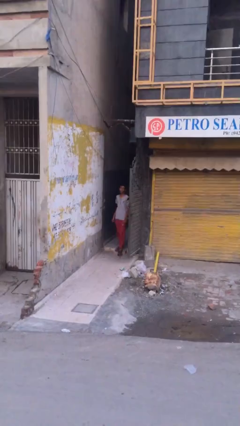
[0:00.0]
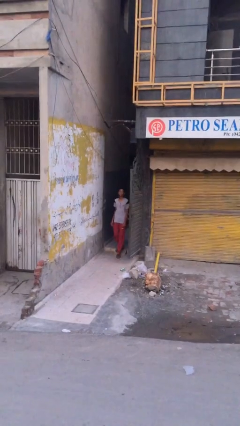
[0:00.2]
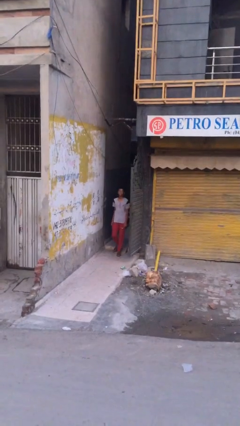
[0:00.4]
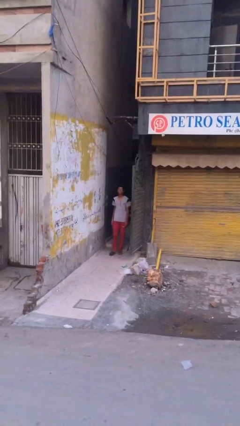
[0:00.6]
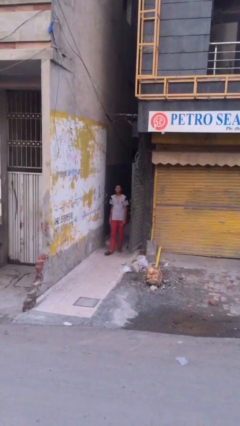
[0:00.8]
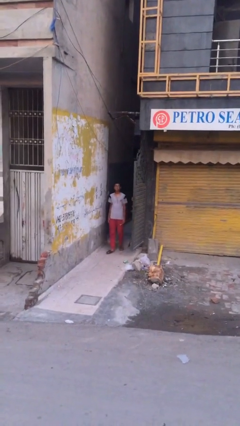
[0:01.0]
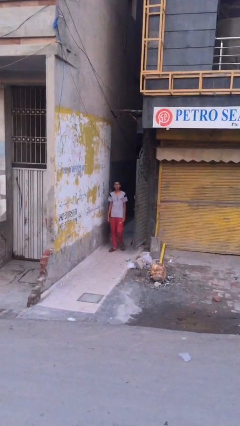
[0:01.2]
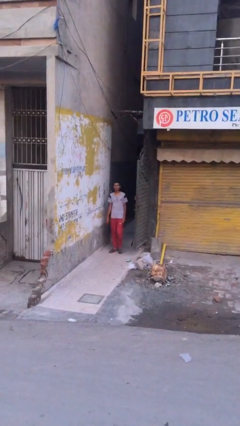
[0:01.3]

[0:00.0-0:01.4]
person enters scene through structure

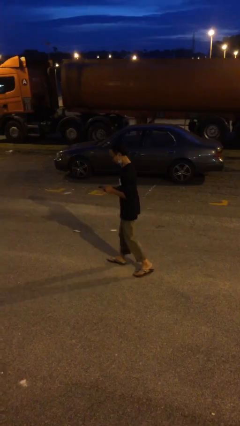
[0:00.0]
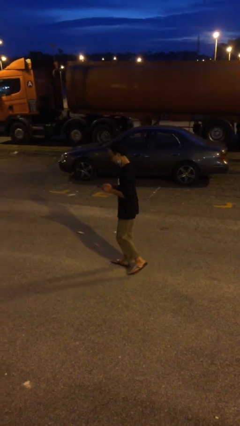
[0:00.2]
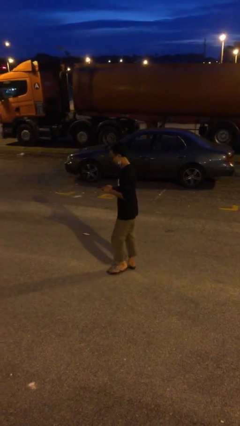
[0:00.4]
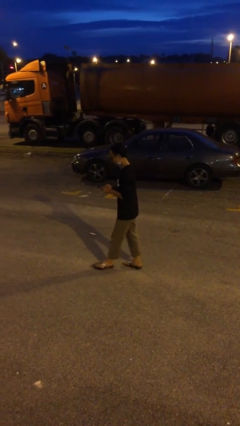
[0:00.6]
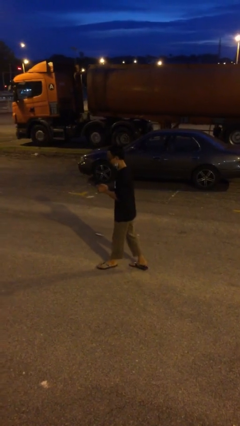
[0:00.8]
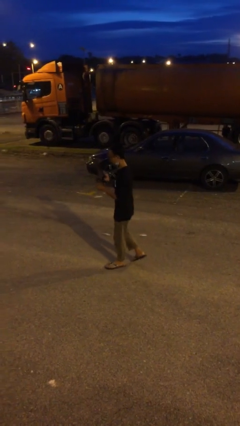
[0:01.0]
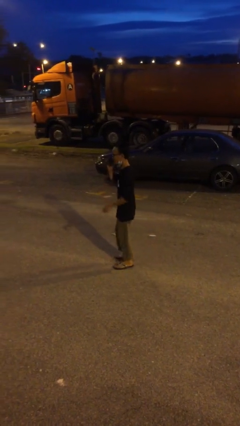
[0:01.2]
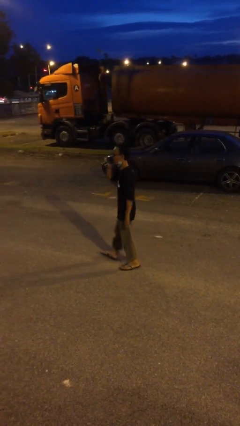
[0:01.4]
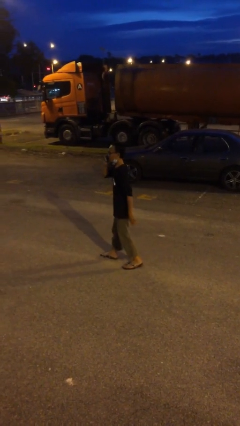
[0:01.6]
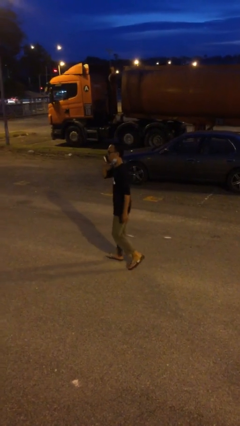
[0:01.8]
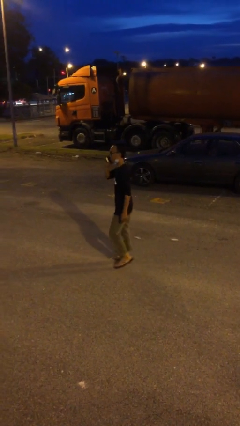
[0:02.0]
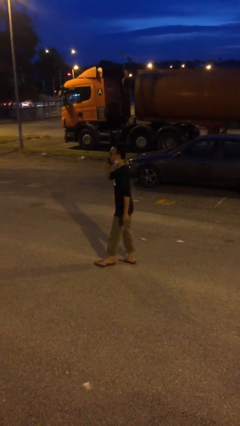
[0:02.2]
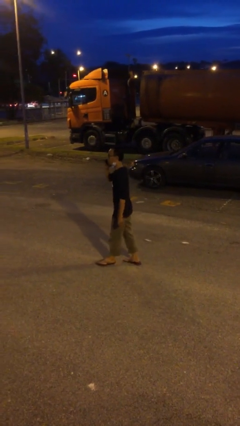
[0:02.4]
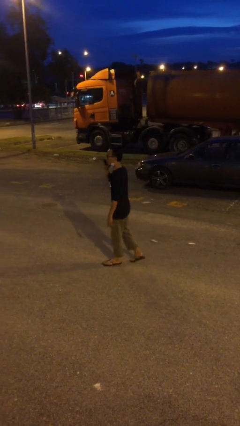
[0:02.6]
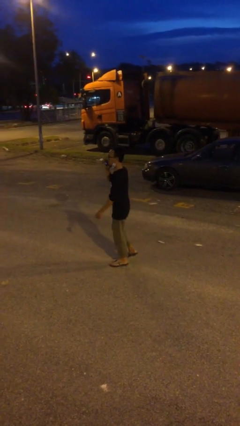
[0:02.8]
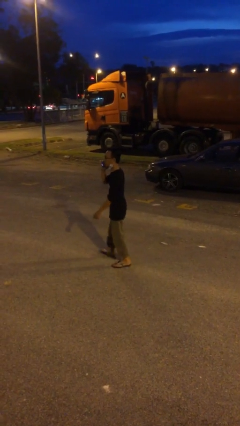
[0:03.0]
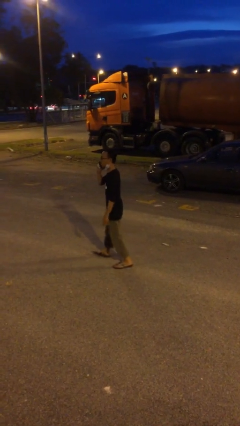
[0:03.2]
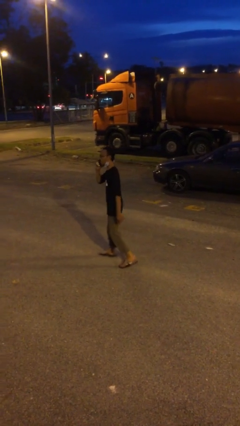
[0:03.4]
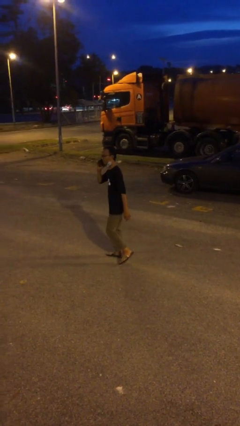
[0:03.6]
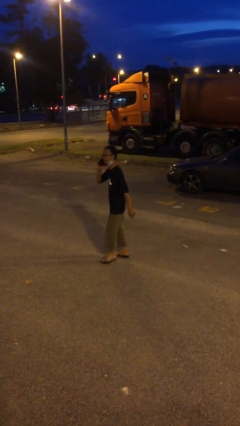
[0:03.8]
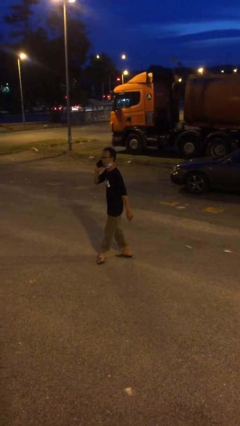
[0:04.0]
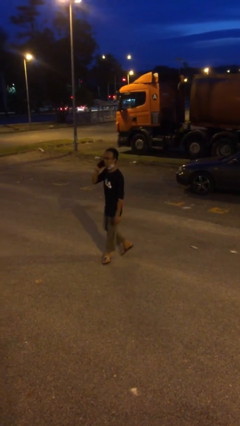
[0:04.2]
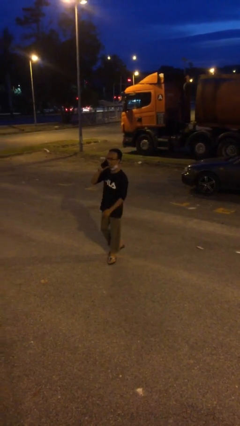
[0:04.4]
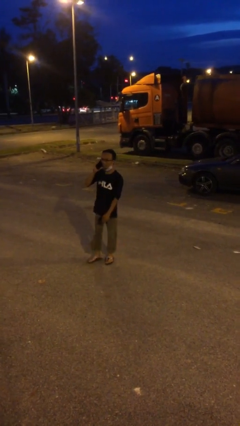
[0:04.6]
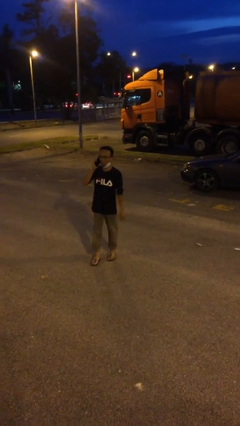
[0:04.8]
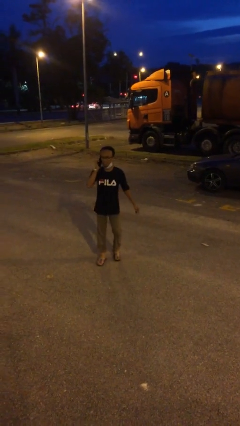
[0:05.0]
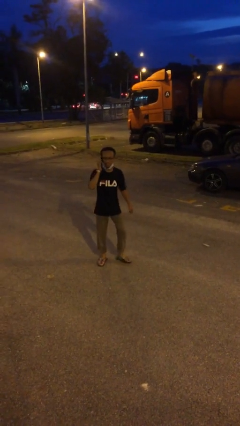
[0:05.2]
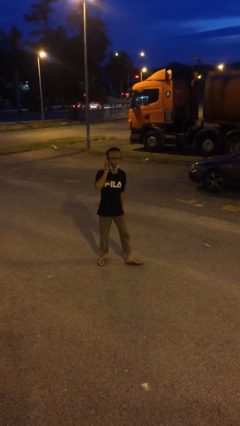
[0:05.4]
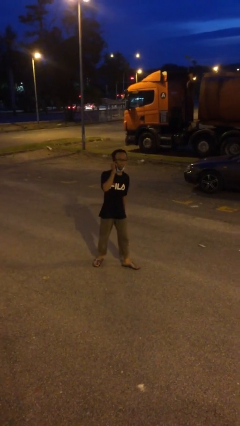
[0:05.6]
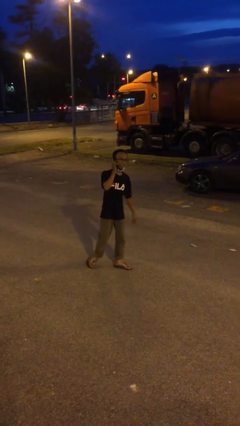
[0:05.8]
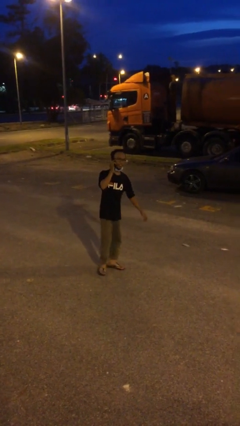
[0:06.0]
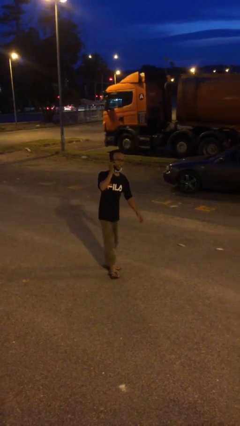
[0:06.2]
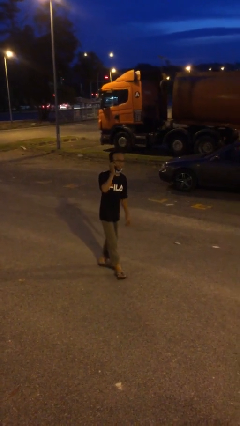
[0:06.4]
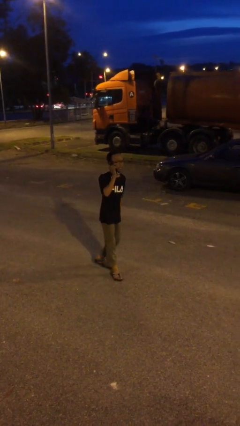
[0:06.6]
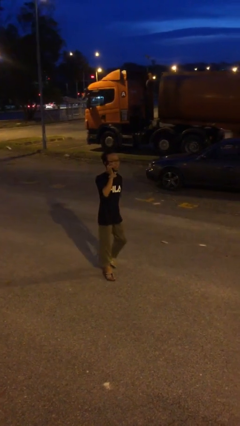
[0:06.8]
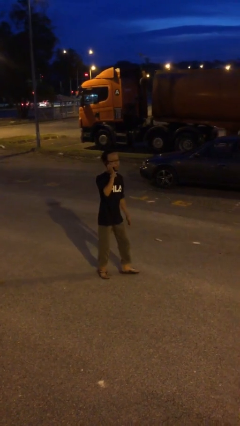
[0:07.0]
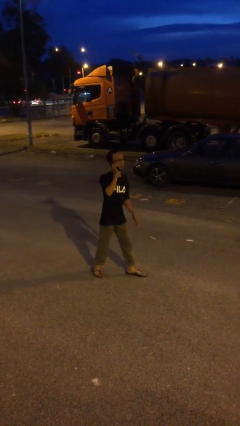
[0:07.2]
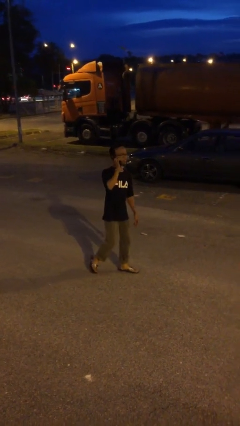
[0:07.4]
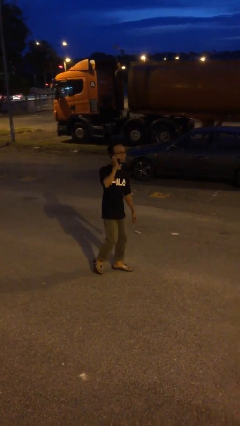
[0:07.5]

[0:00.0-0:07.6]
person talks on phone

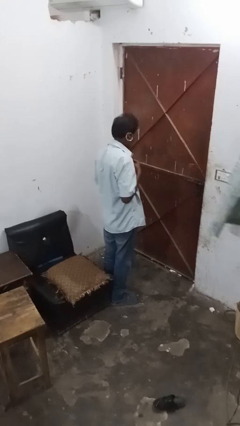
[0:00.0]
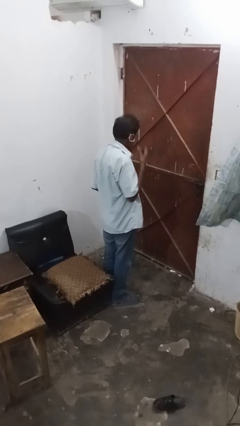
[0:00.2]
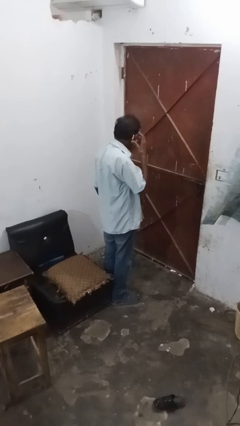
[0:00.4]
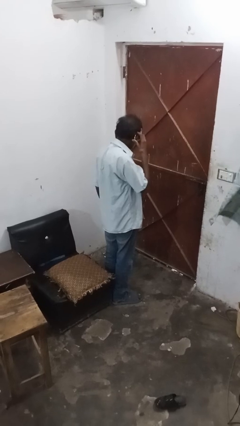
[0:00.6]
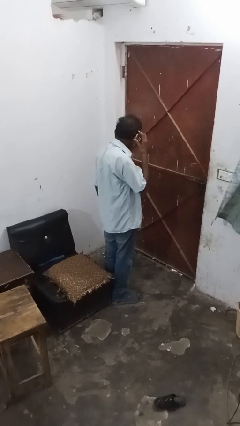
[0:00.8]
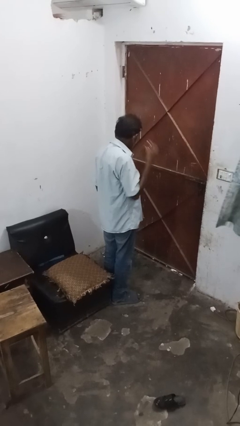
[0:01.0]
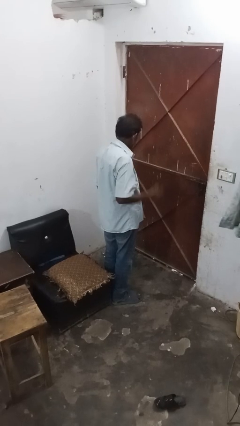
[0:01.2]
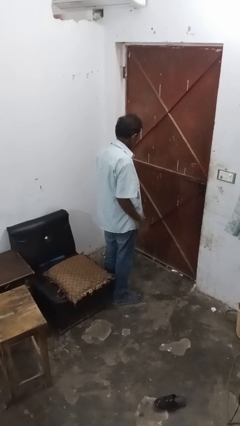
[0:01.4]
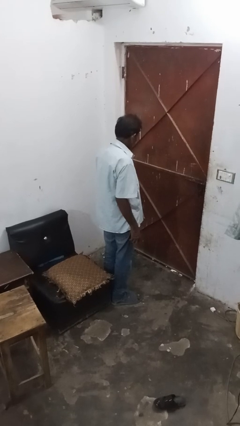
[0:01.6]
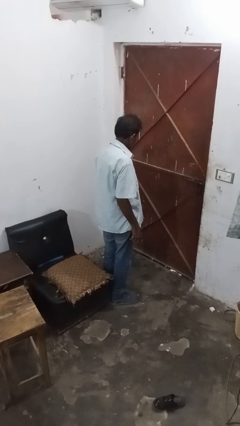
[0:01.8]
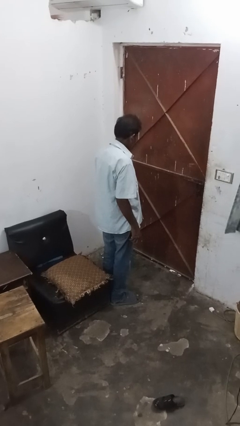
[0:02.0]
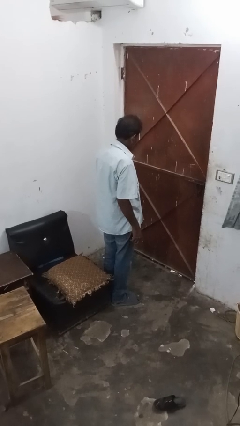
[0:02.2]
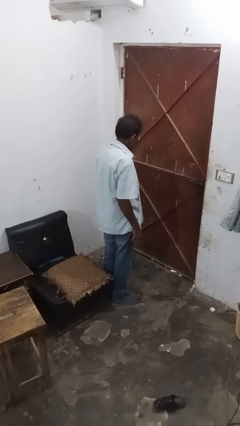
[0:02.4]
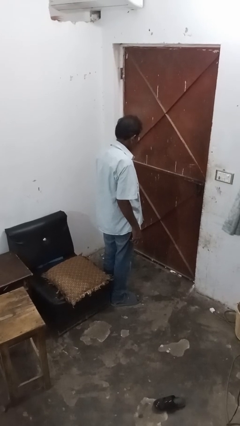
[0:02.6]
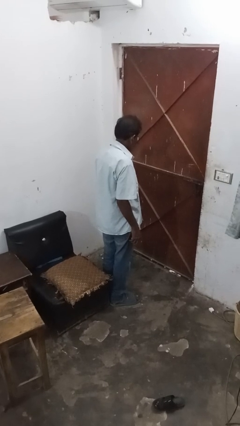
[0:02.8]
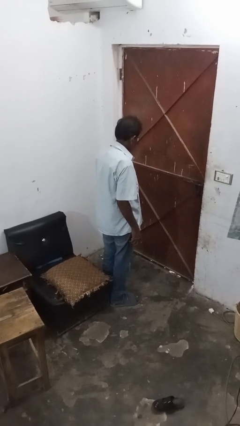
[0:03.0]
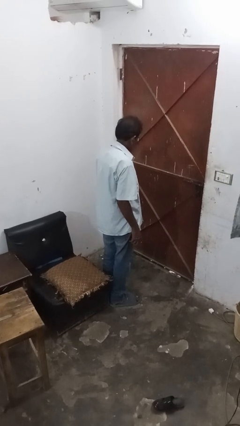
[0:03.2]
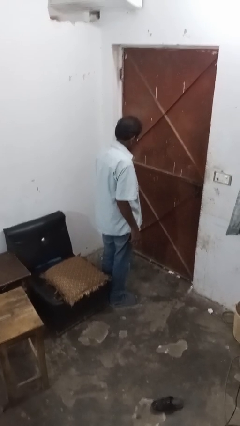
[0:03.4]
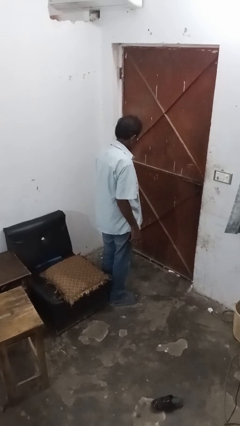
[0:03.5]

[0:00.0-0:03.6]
person takes off earrings

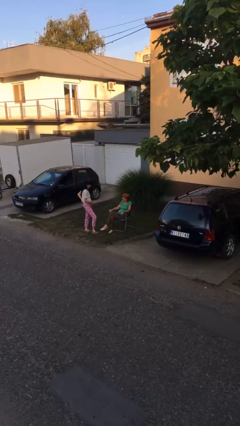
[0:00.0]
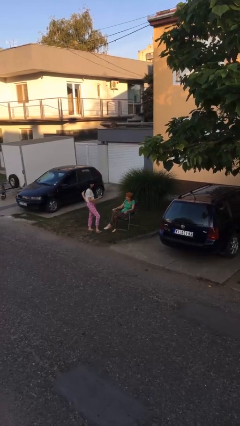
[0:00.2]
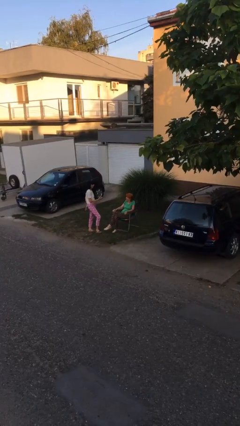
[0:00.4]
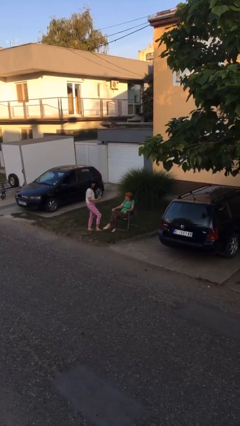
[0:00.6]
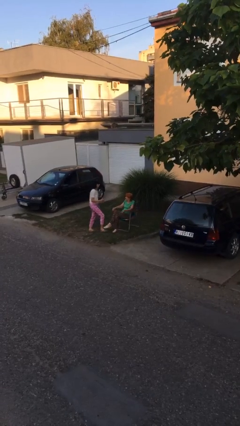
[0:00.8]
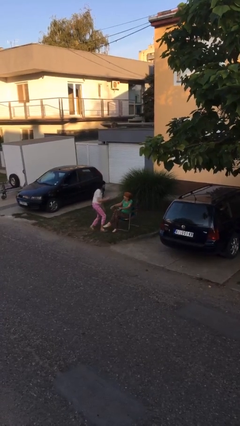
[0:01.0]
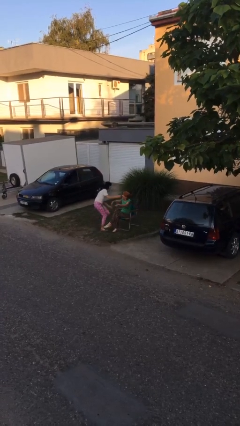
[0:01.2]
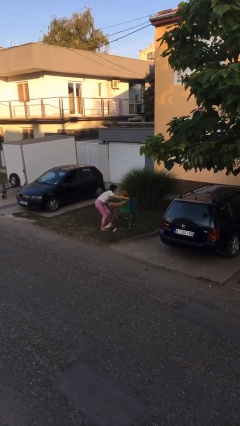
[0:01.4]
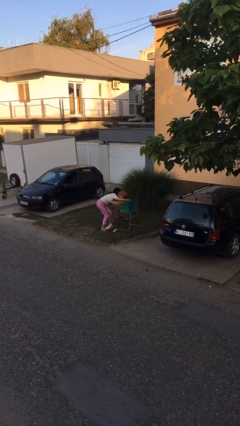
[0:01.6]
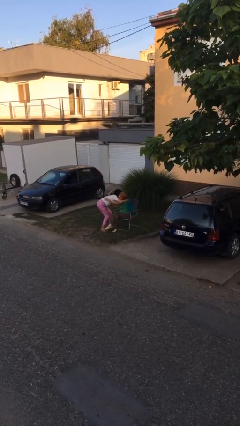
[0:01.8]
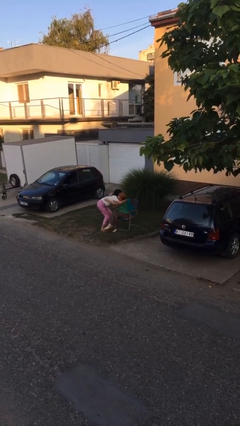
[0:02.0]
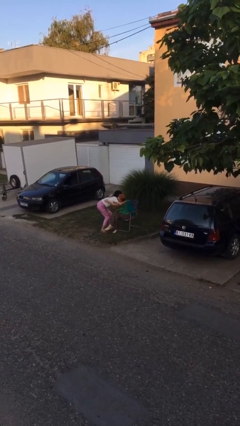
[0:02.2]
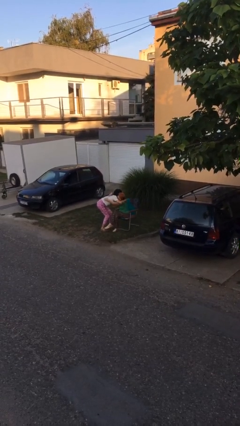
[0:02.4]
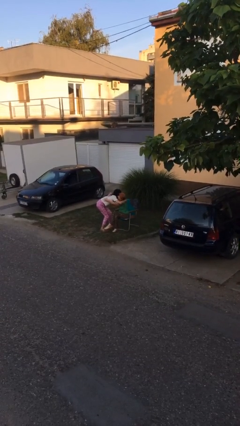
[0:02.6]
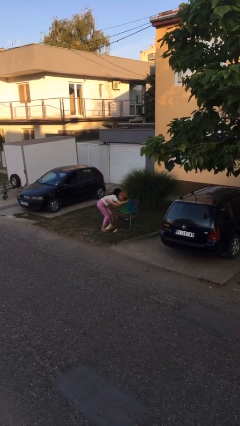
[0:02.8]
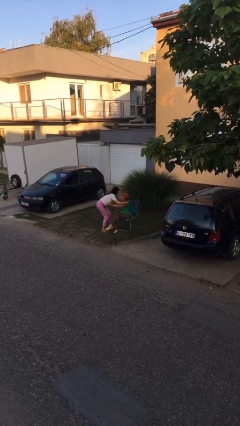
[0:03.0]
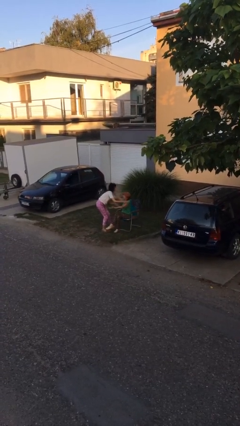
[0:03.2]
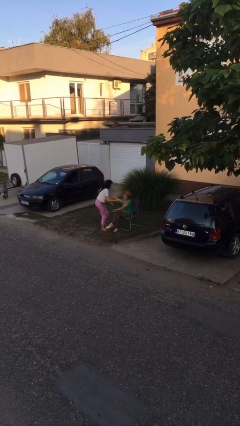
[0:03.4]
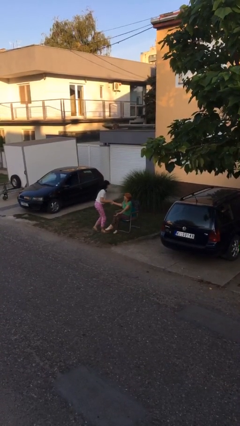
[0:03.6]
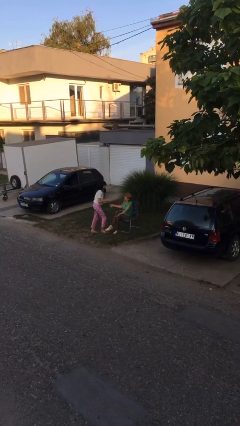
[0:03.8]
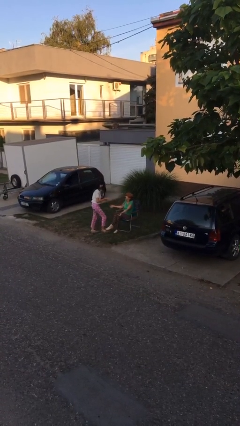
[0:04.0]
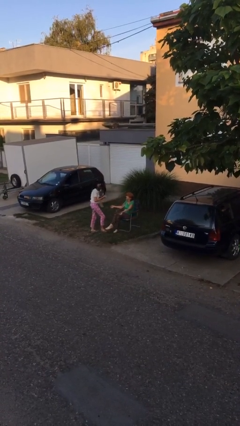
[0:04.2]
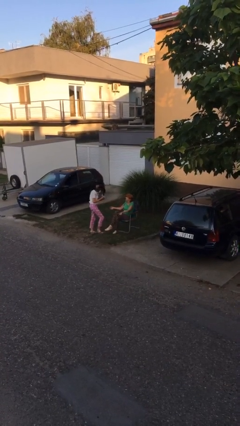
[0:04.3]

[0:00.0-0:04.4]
person embraces person

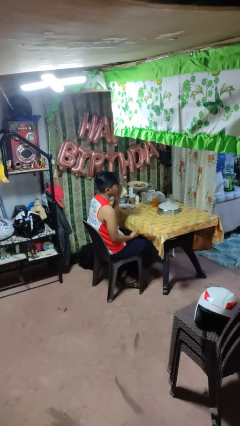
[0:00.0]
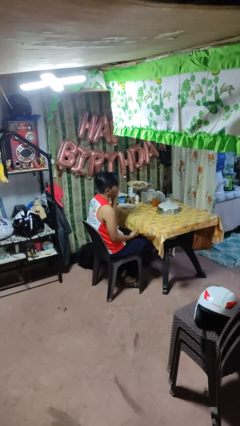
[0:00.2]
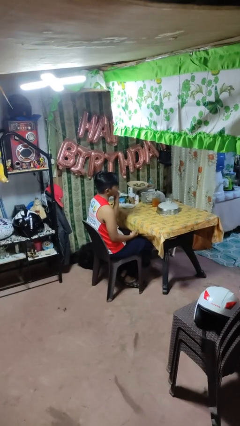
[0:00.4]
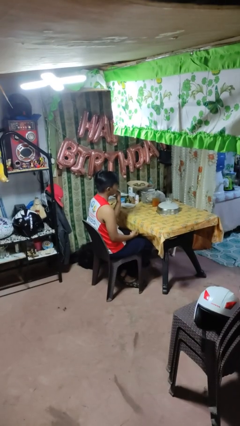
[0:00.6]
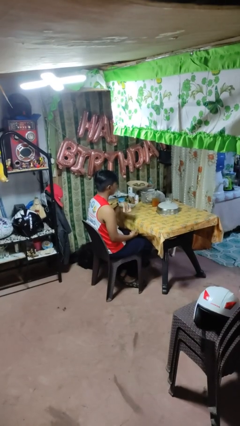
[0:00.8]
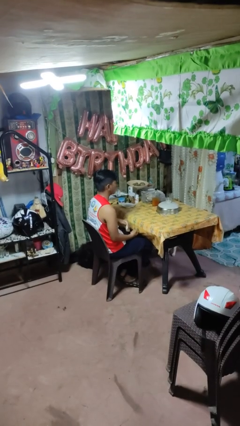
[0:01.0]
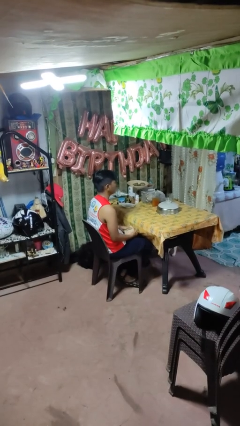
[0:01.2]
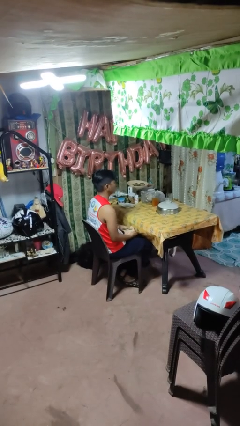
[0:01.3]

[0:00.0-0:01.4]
person wipes mouth with napkin
